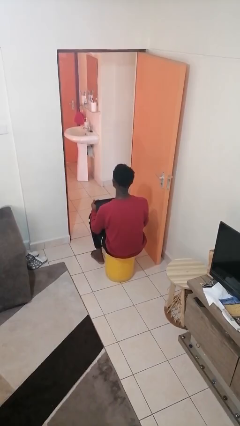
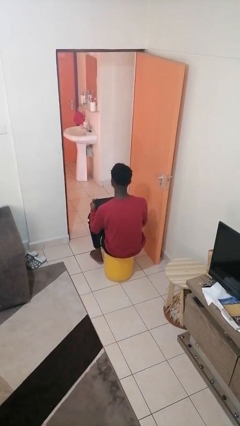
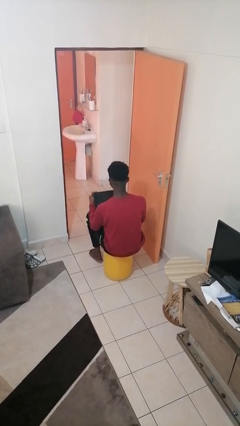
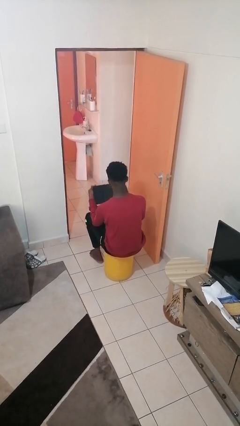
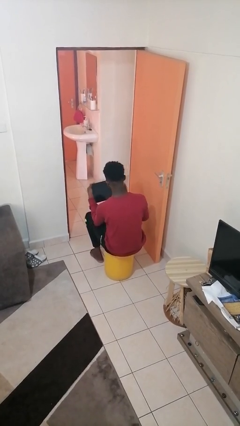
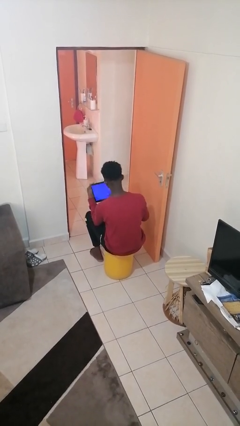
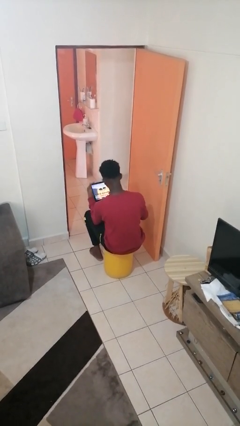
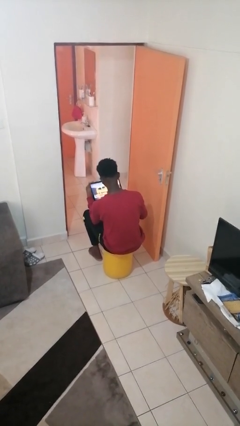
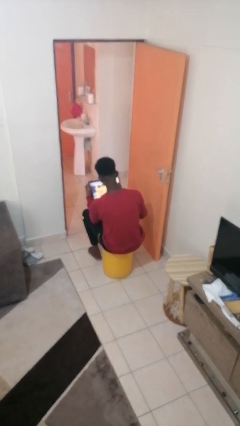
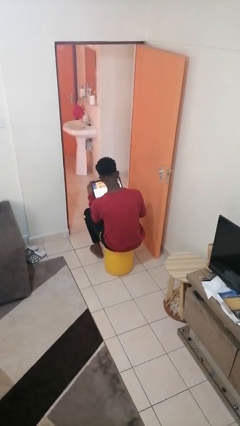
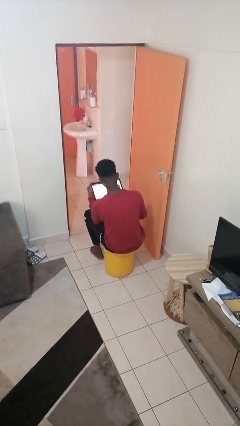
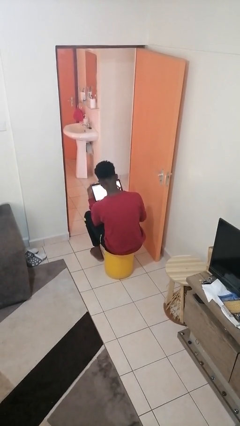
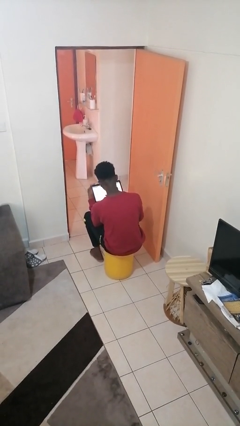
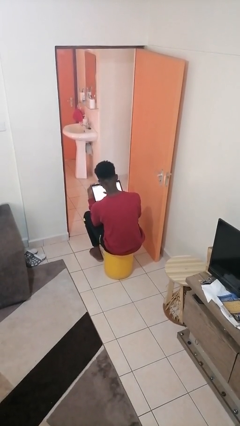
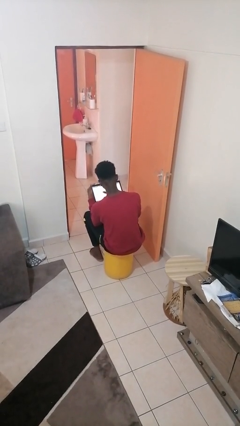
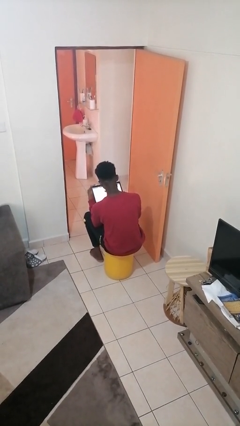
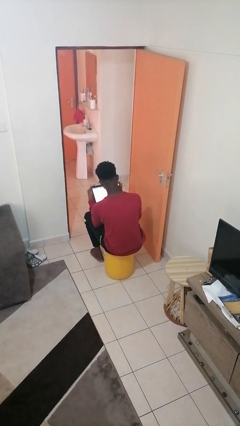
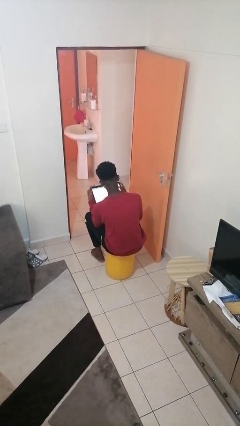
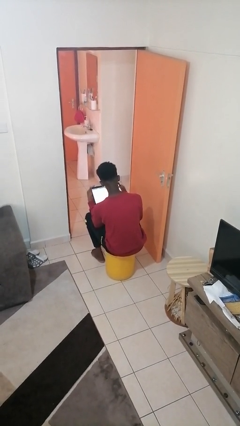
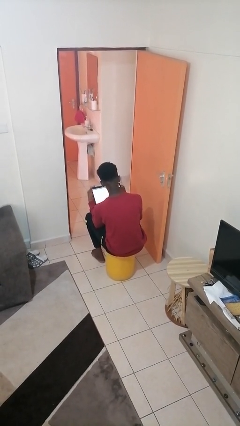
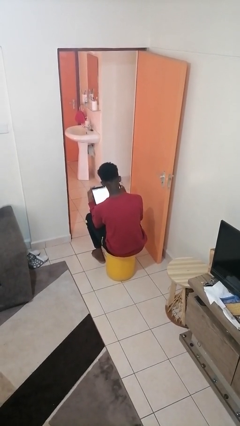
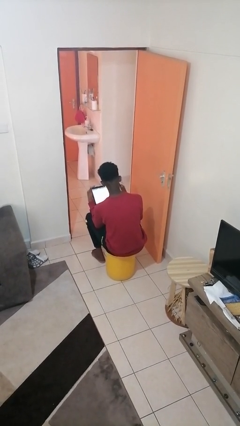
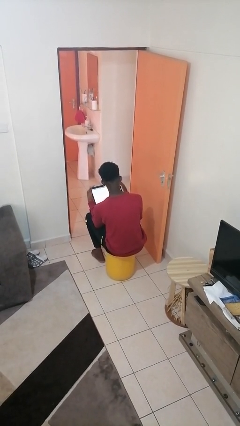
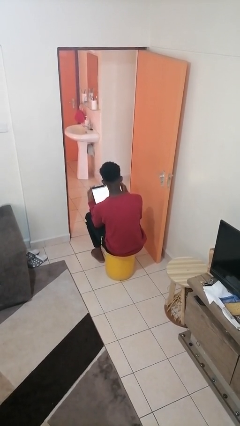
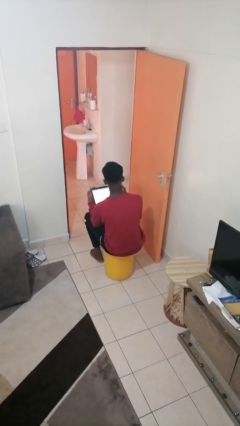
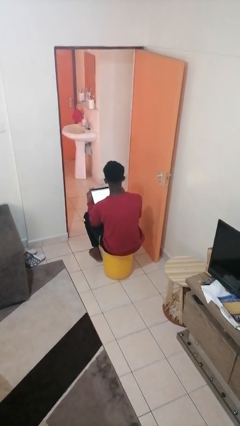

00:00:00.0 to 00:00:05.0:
person interacts with tablet

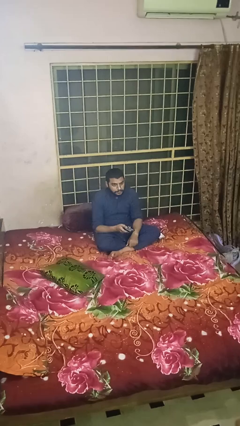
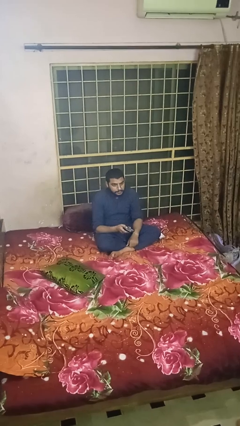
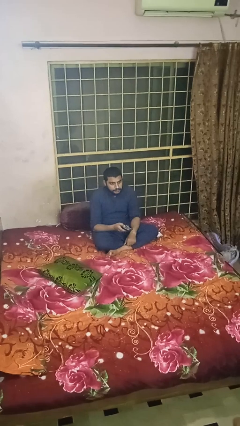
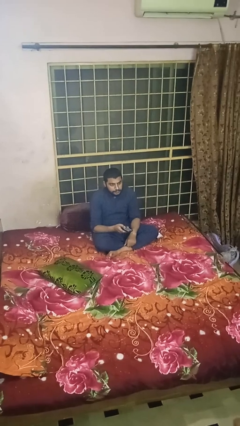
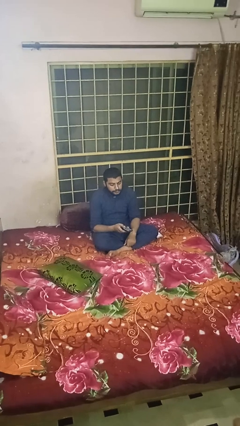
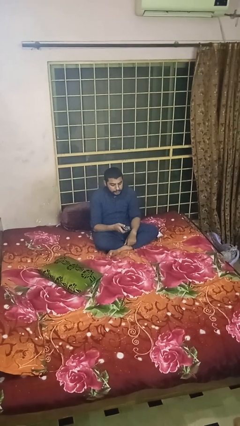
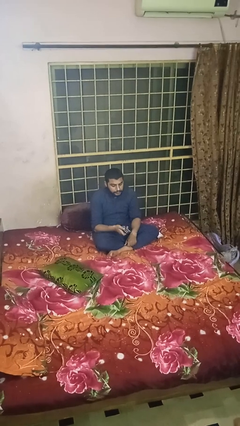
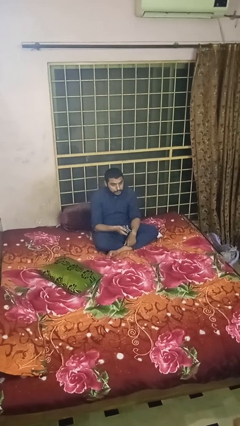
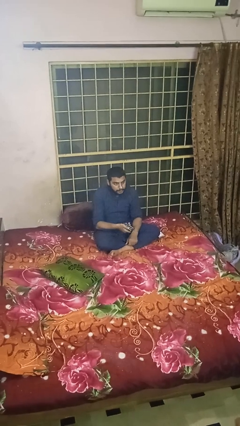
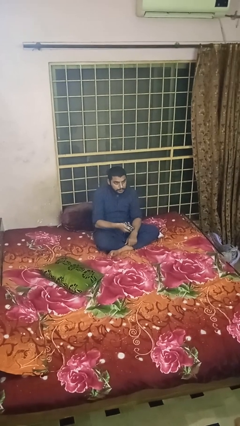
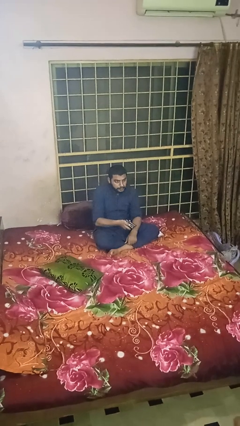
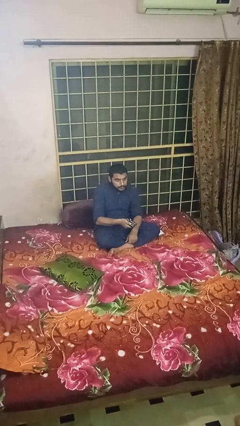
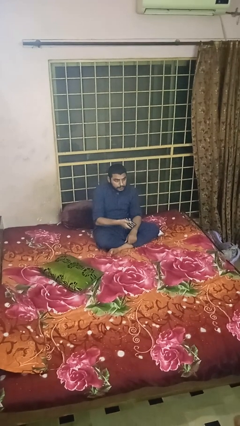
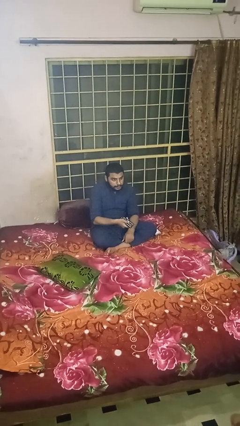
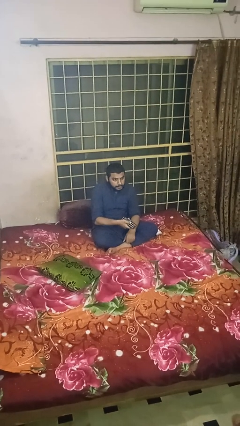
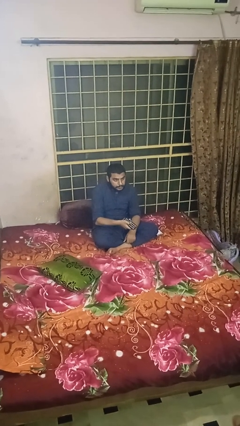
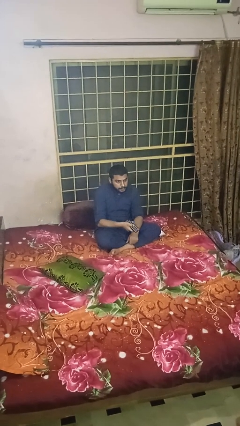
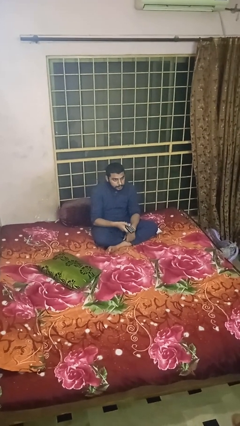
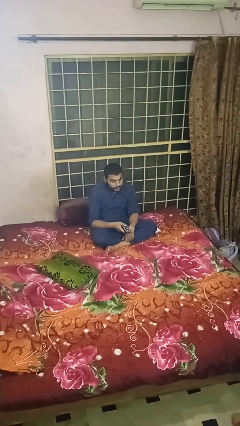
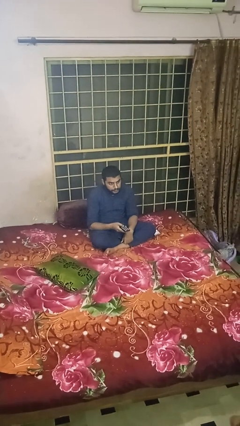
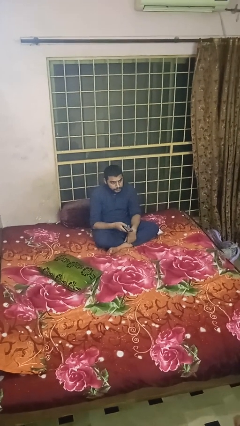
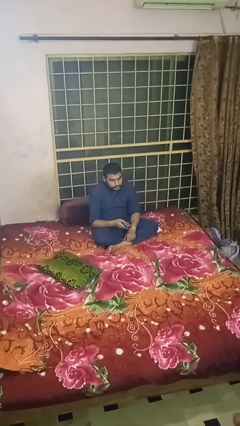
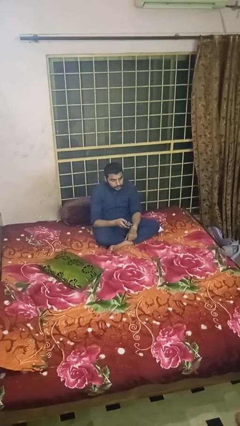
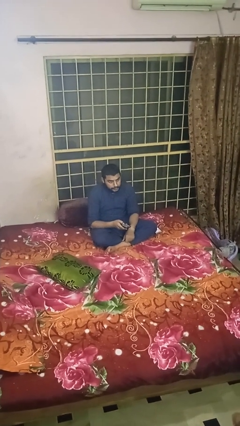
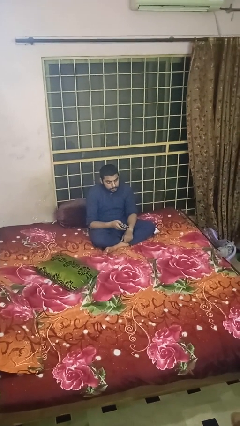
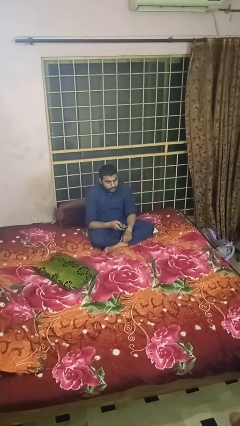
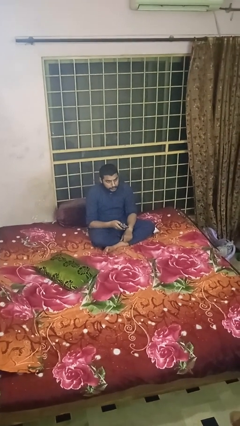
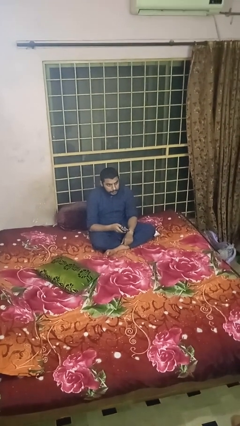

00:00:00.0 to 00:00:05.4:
person uses television remote

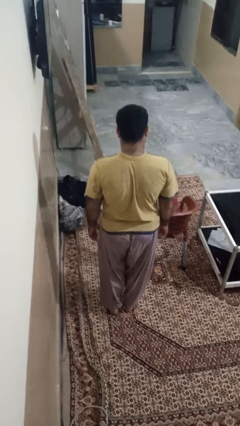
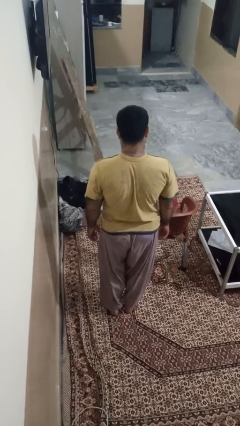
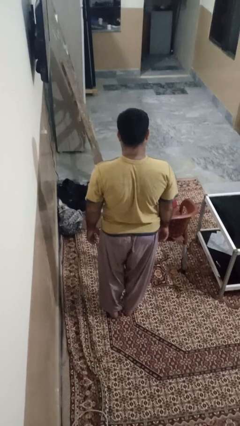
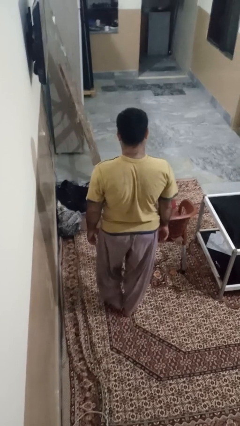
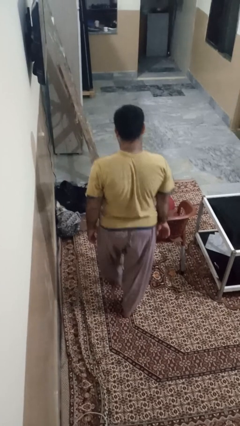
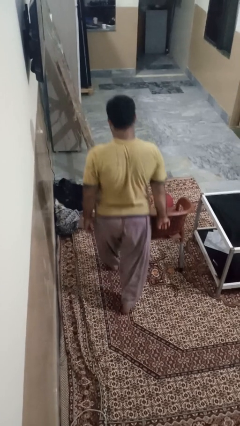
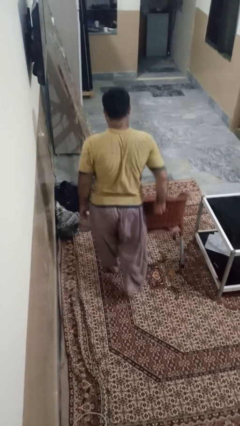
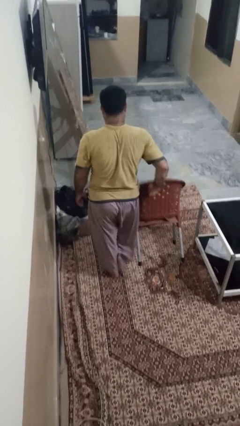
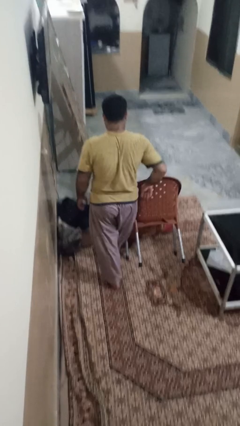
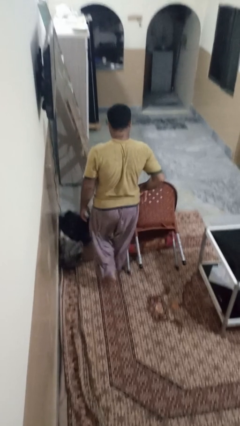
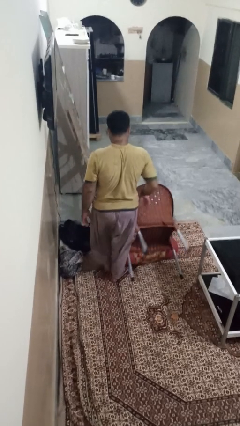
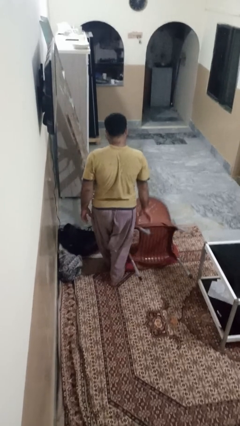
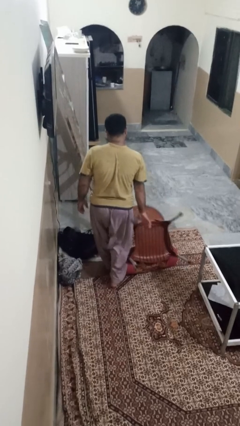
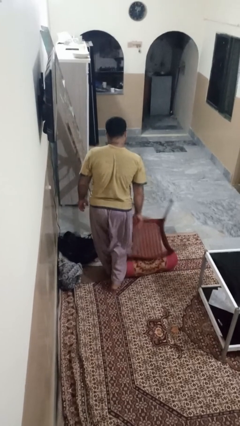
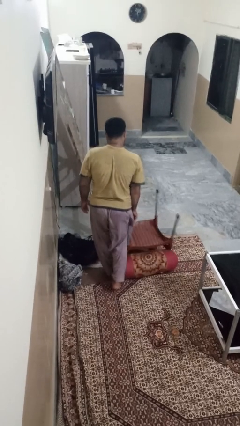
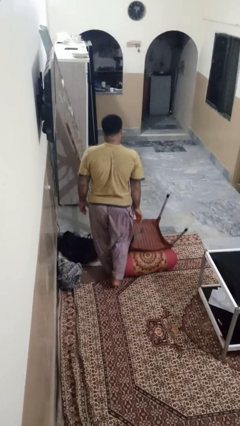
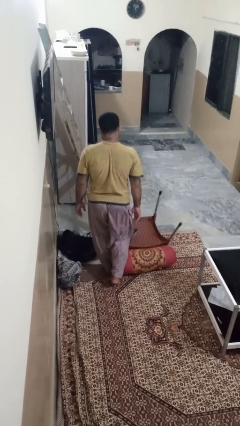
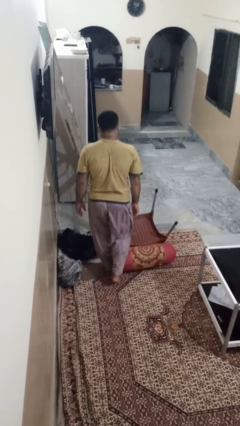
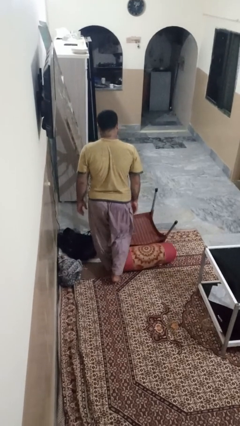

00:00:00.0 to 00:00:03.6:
person knocks over furniture

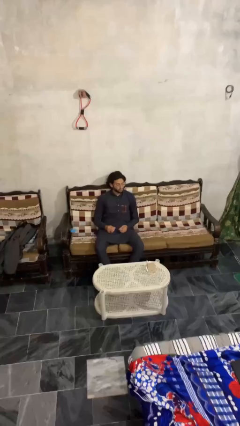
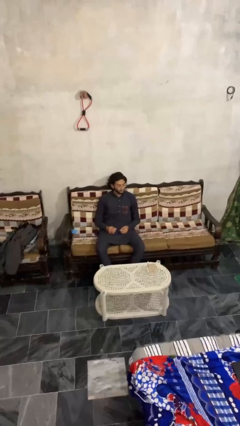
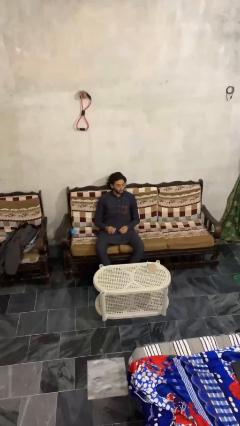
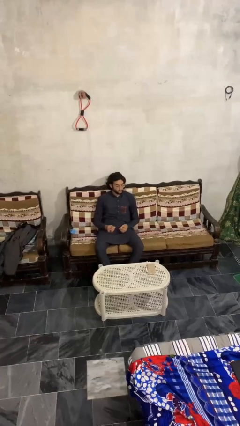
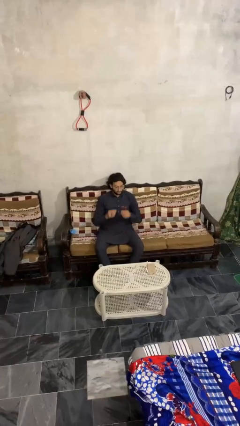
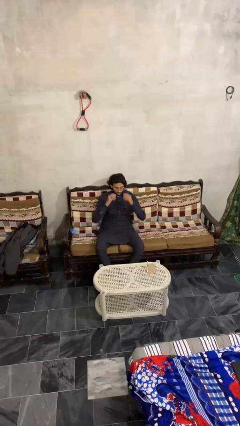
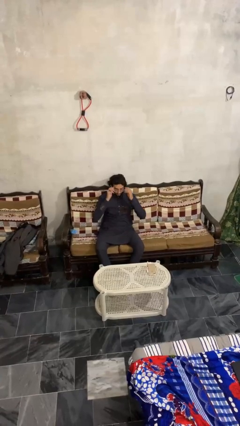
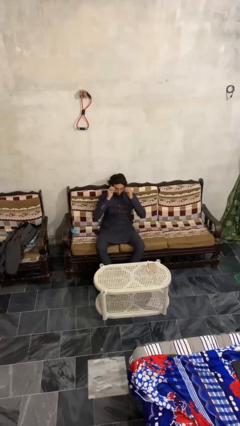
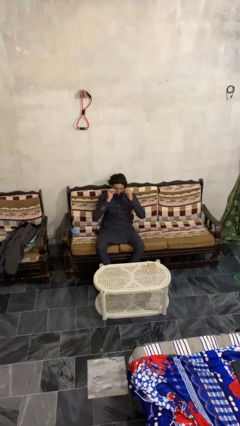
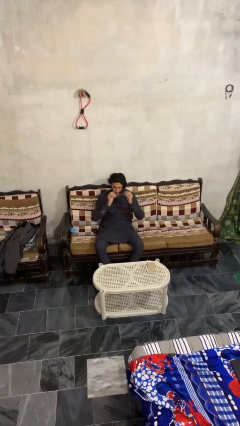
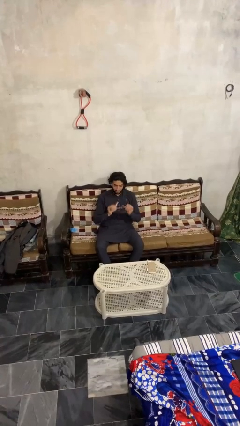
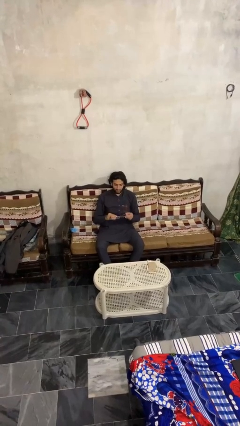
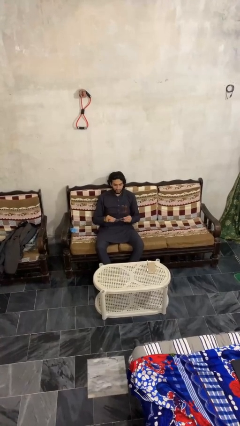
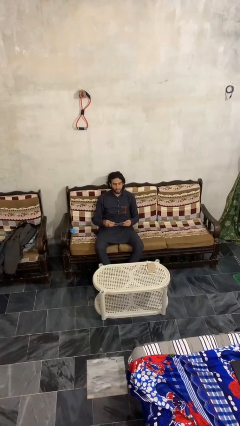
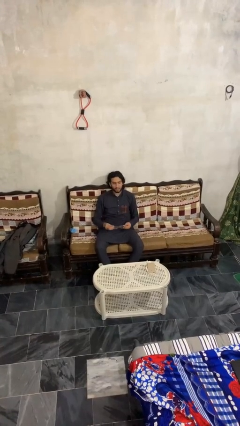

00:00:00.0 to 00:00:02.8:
person takes off glasses

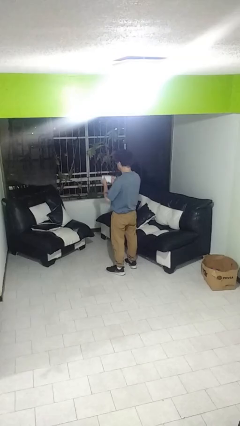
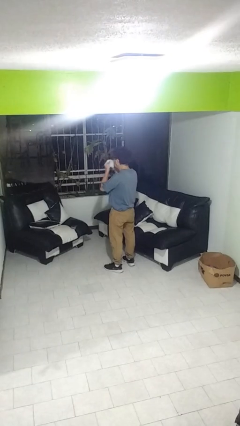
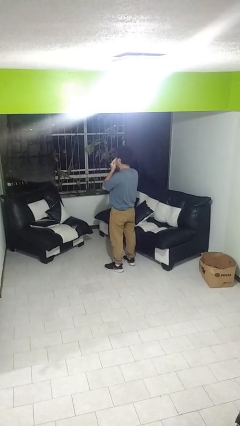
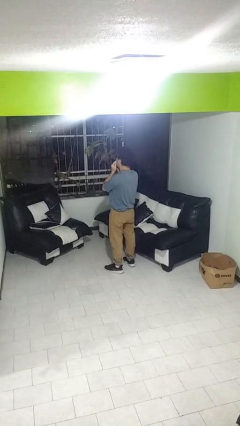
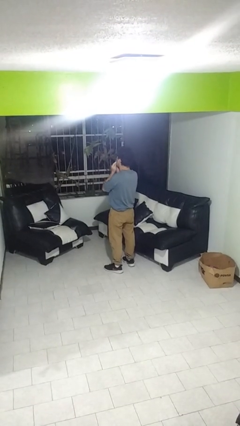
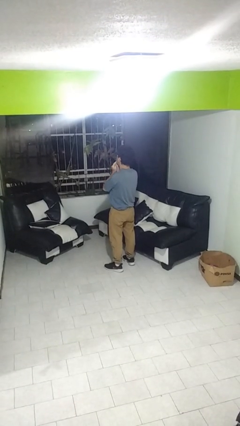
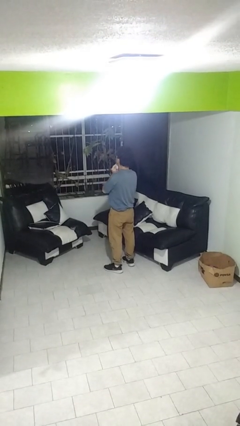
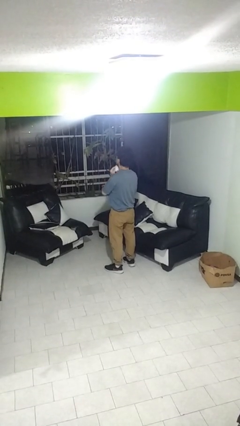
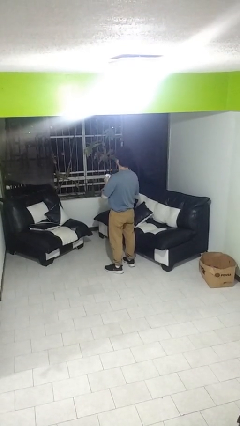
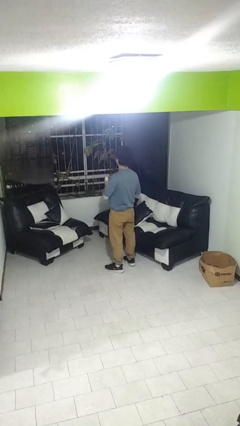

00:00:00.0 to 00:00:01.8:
person wipes mouth with napkin
